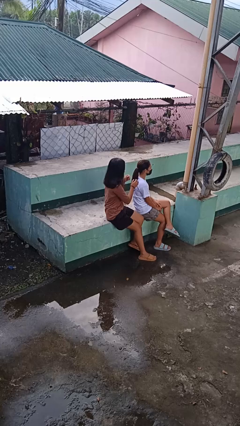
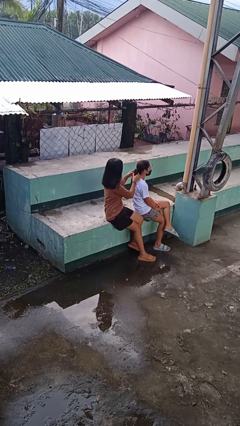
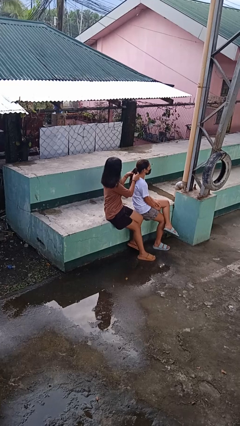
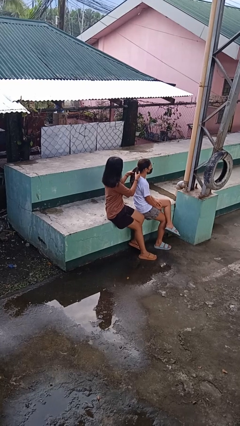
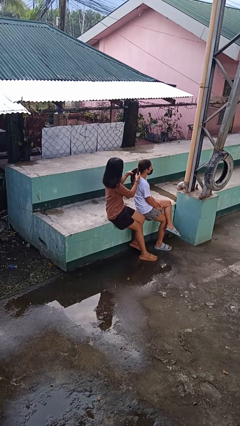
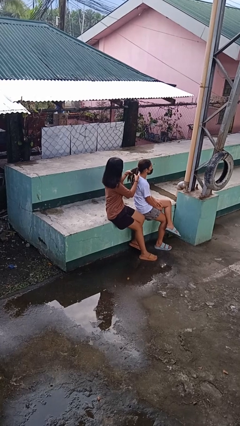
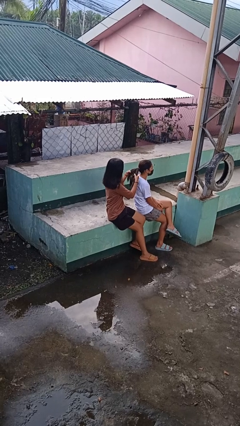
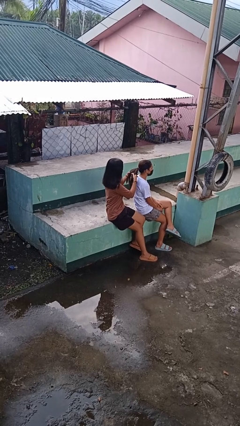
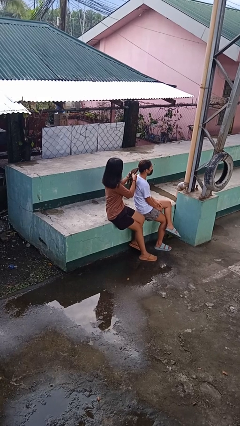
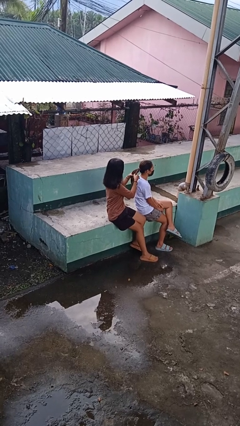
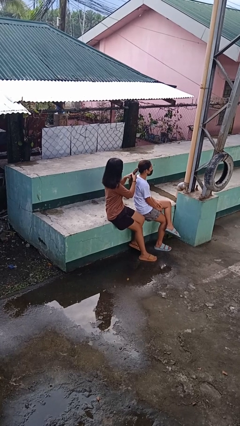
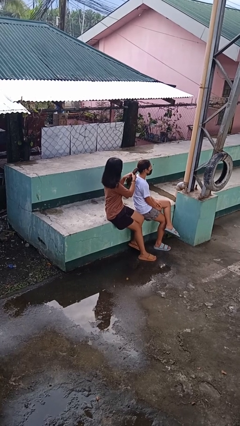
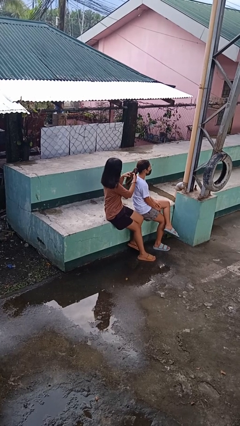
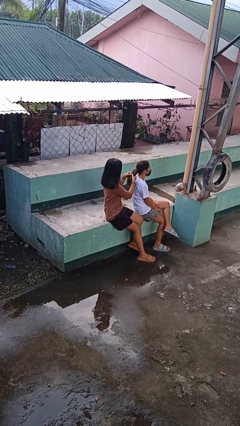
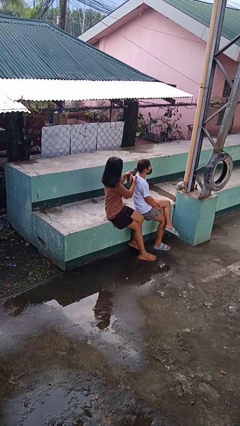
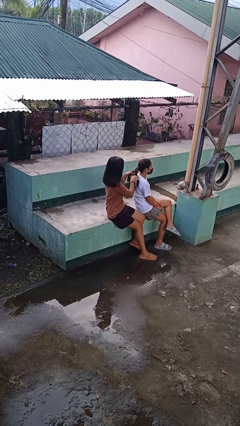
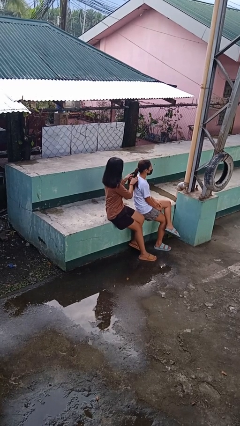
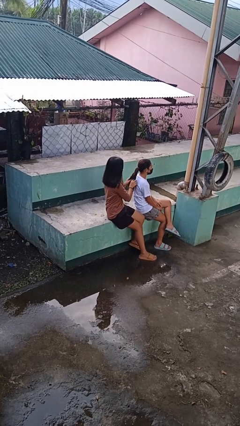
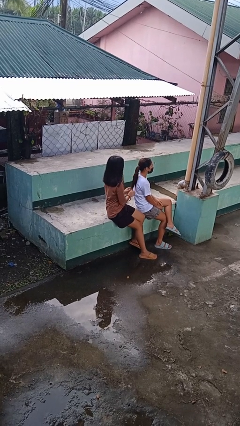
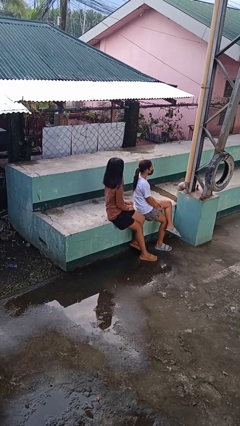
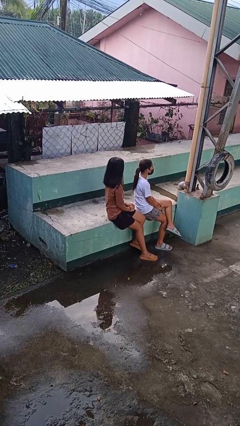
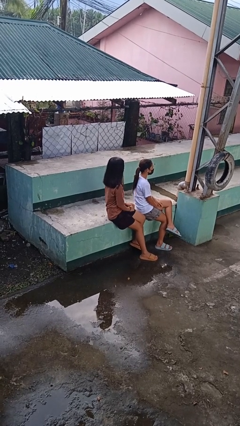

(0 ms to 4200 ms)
person braids hair of person

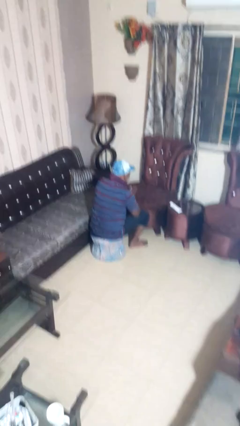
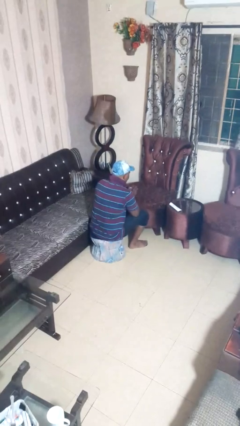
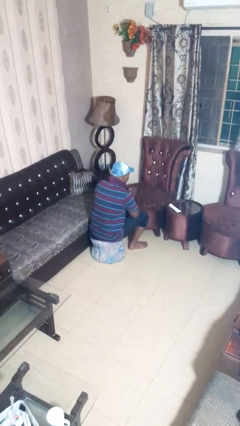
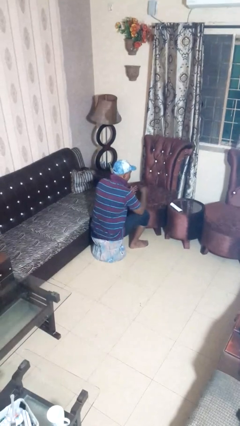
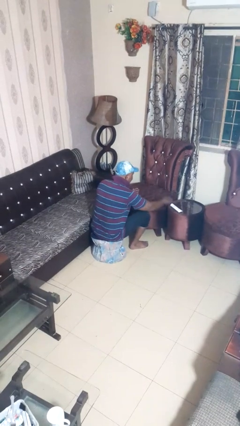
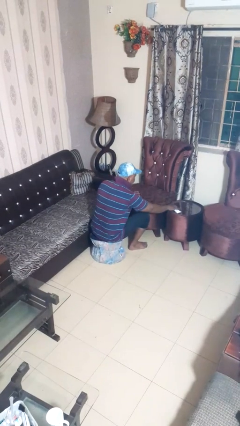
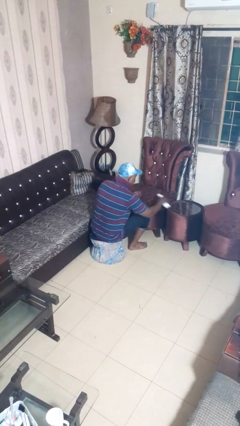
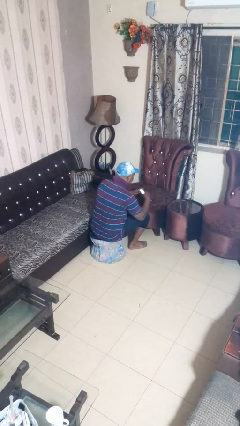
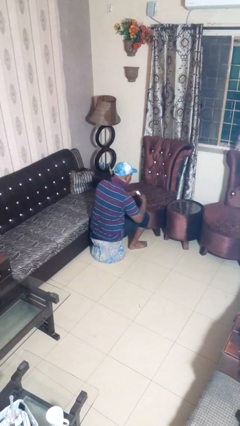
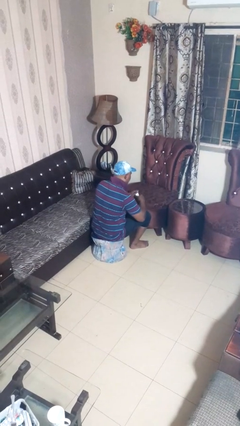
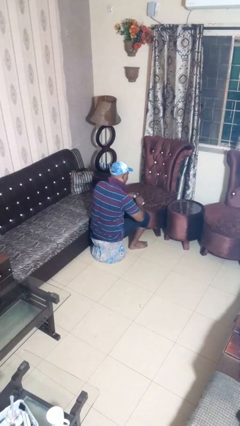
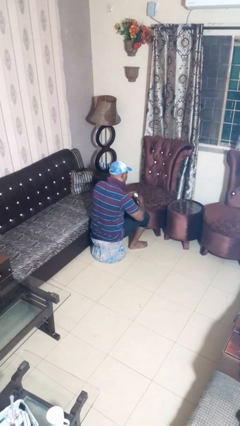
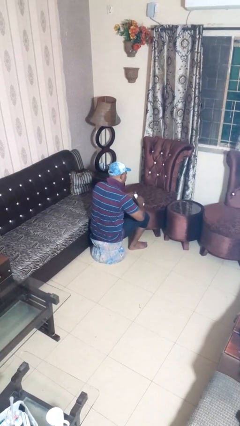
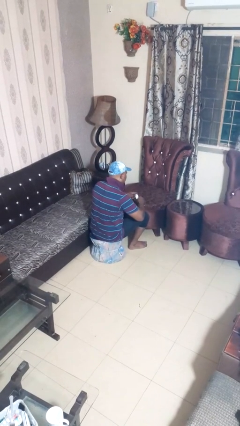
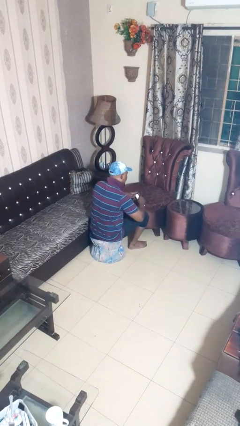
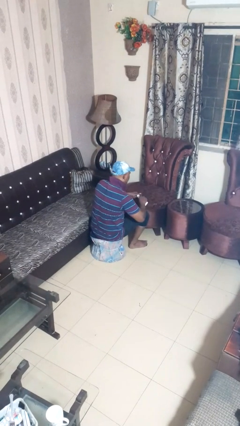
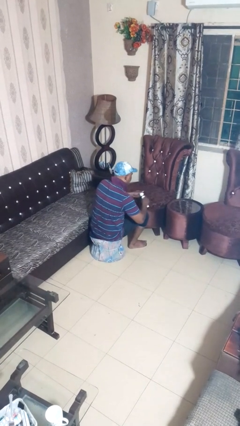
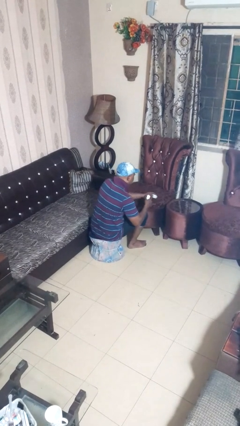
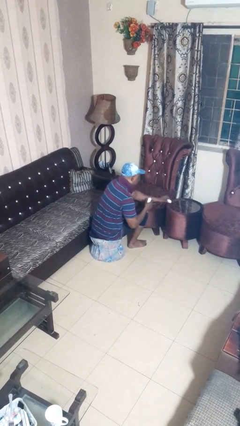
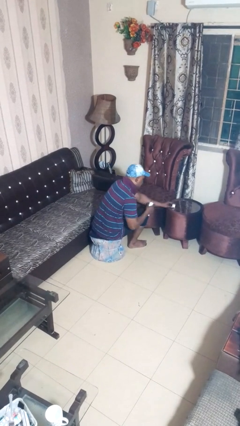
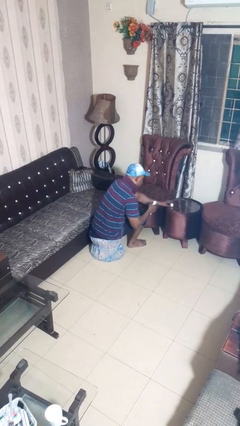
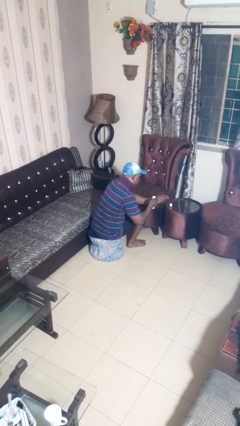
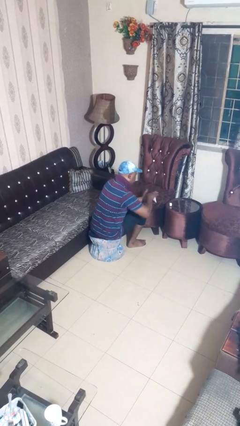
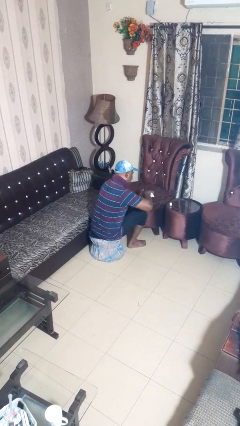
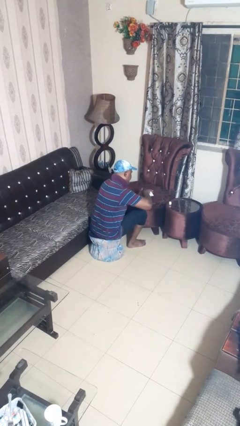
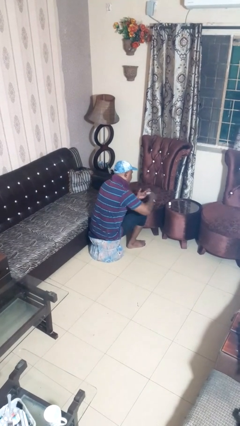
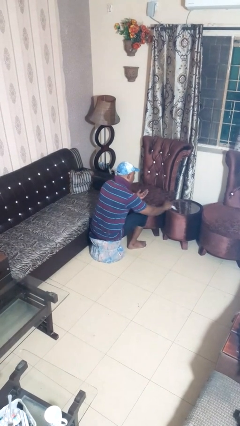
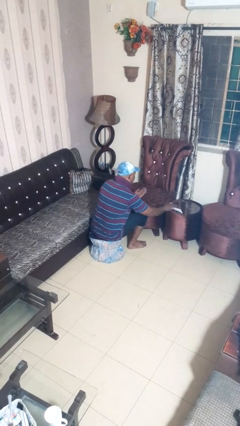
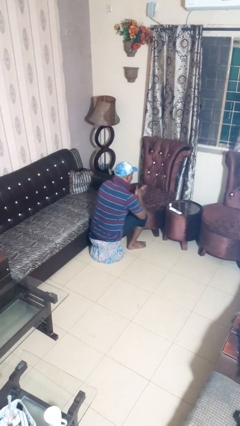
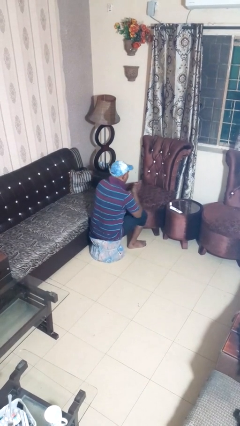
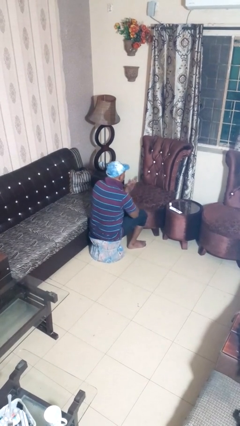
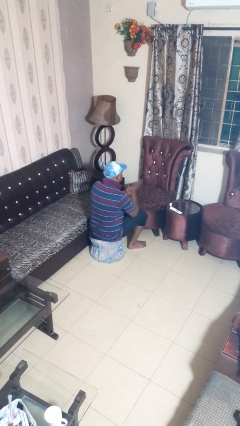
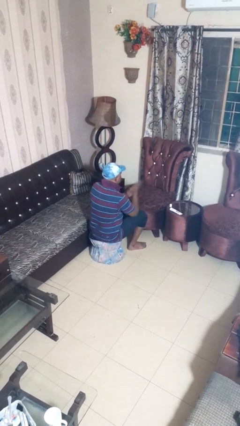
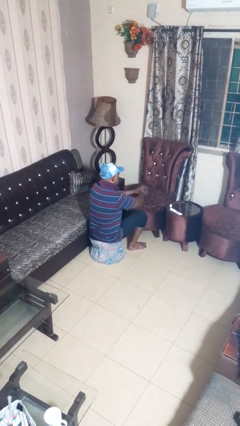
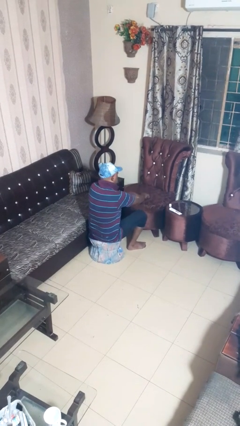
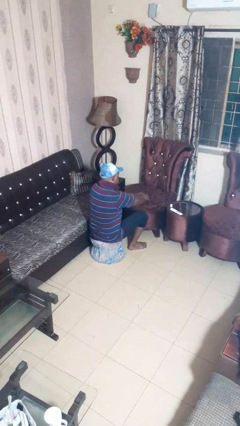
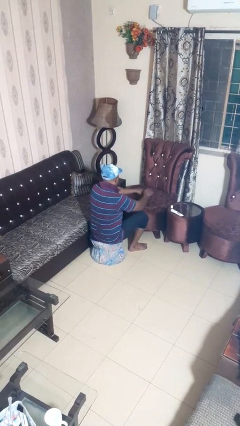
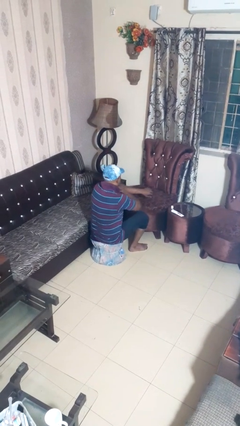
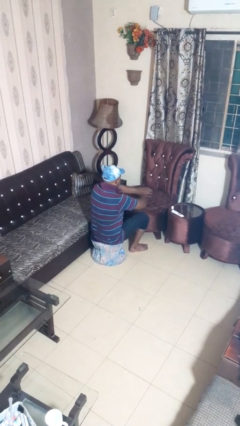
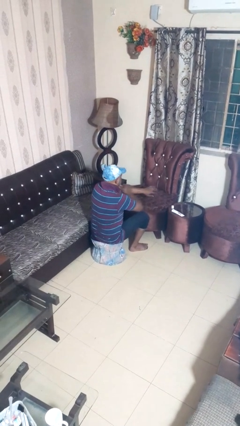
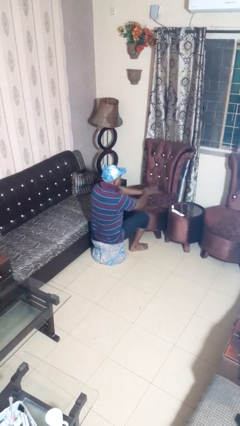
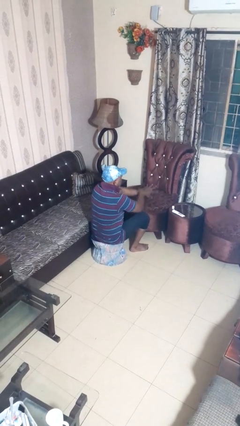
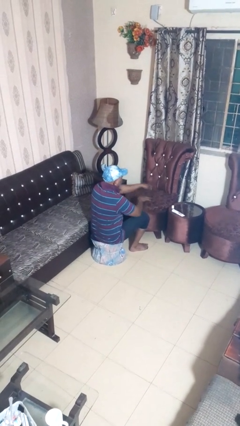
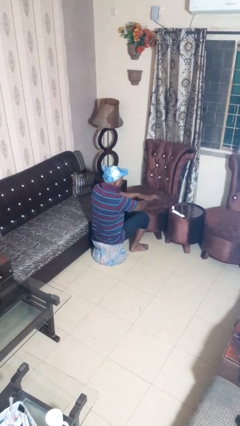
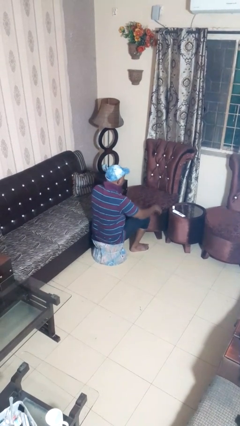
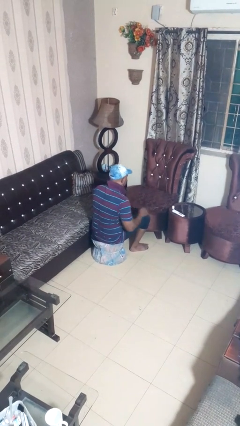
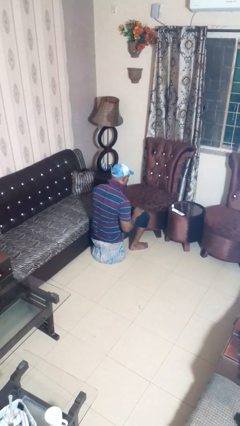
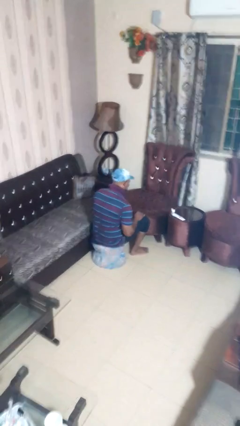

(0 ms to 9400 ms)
person applies sunscreen

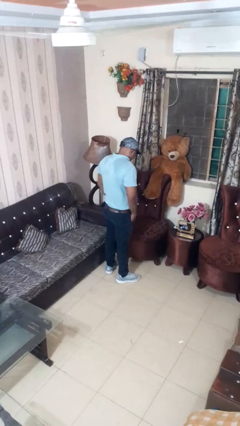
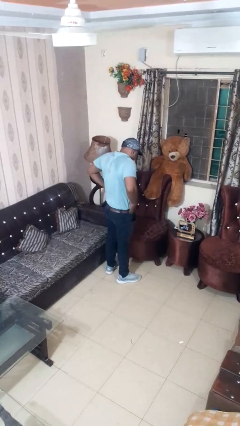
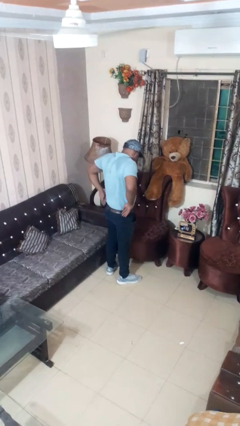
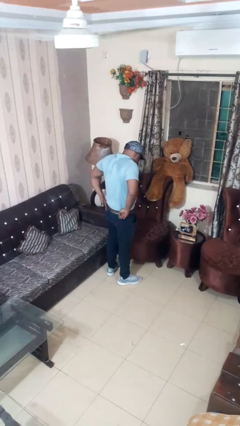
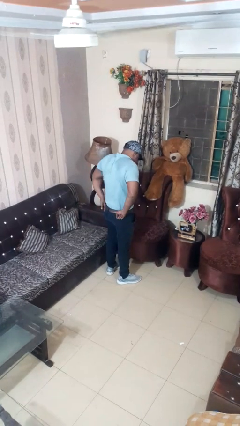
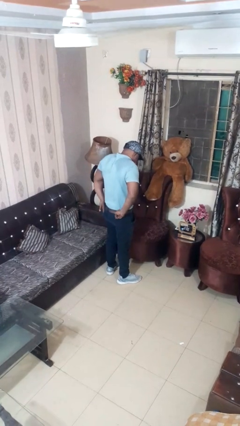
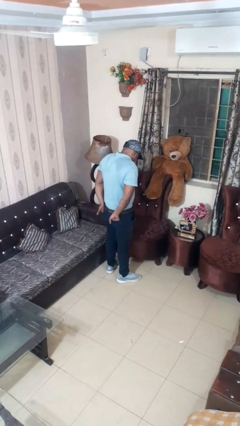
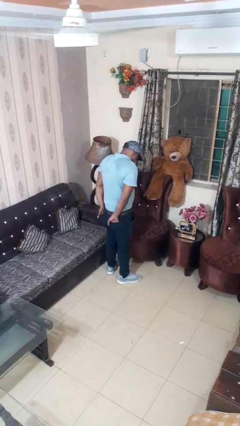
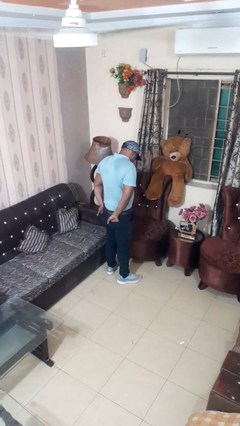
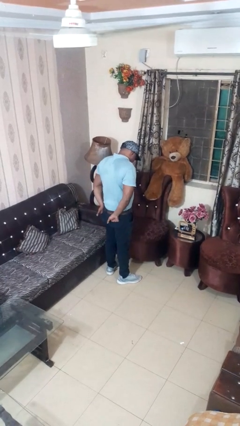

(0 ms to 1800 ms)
person puts hands in back pockets

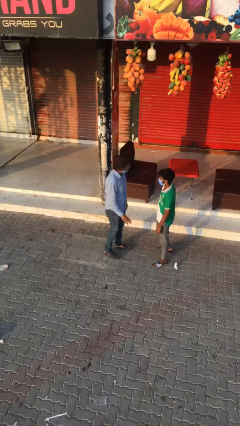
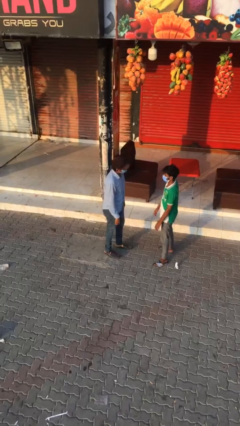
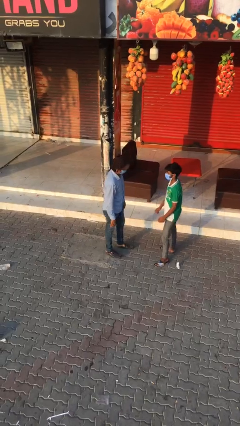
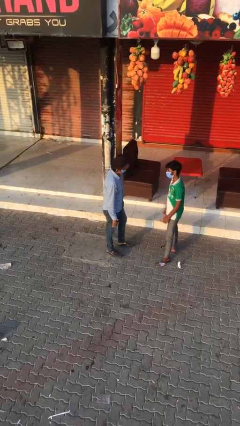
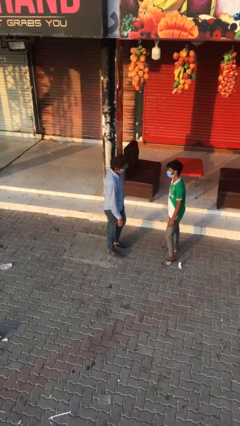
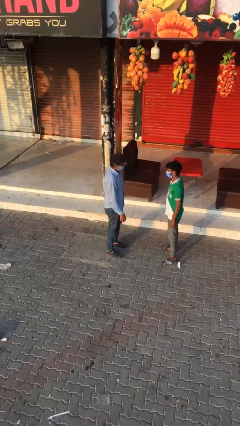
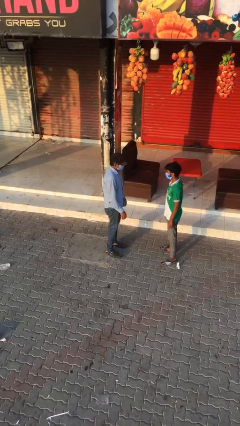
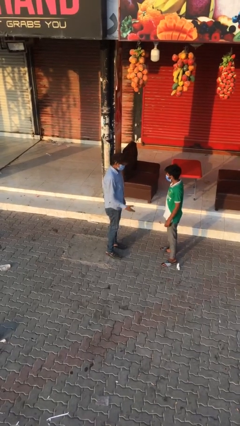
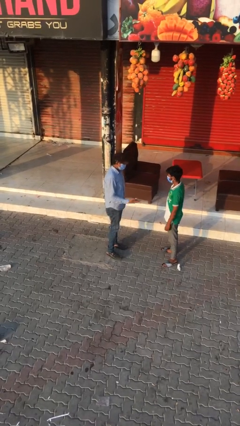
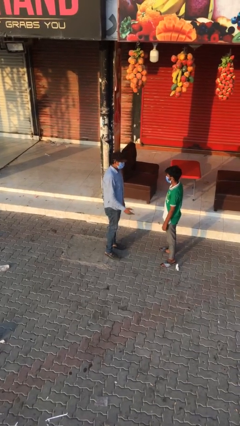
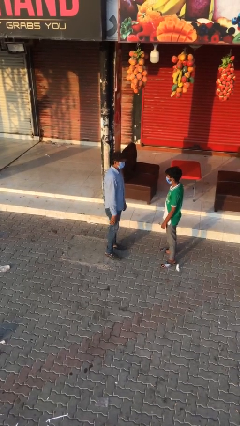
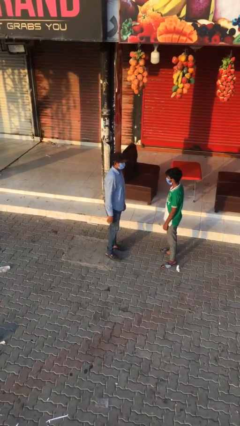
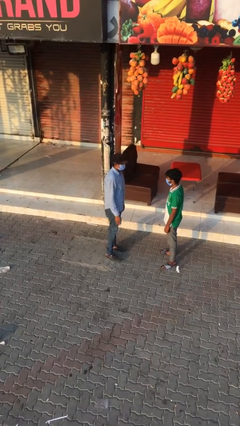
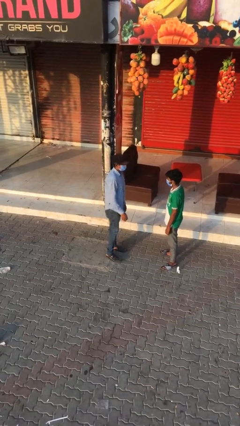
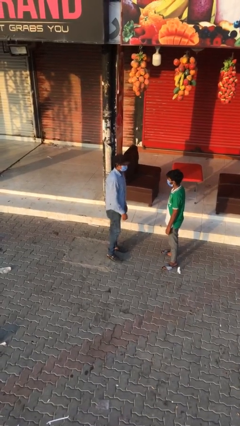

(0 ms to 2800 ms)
person talks to person
